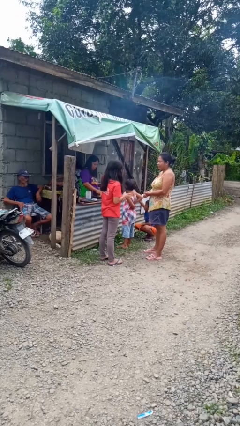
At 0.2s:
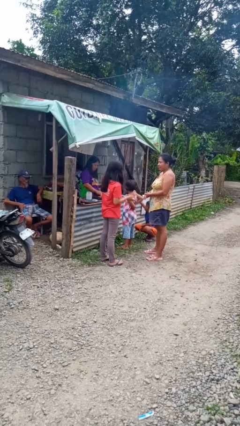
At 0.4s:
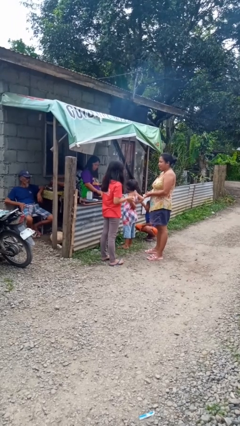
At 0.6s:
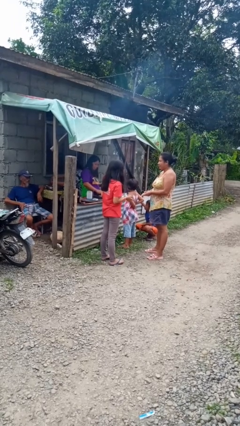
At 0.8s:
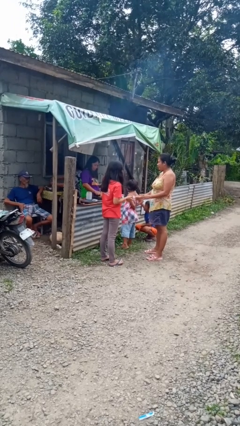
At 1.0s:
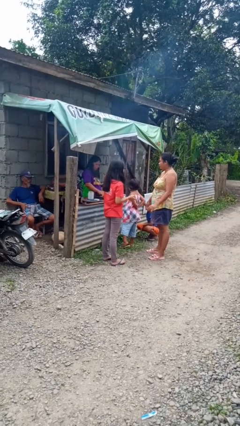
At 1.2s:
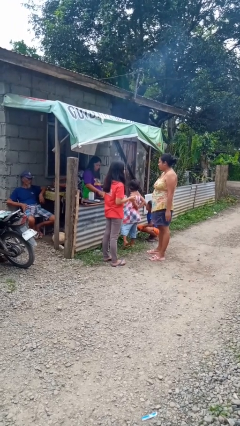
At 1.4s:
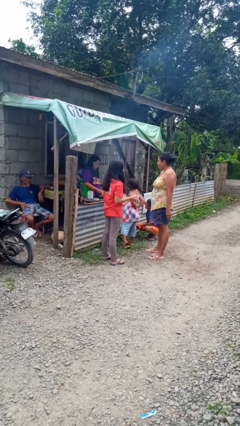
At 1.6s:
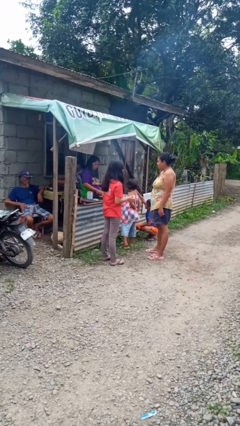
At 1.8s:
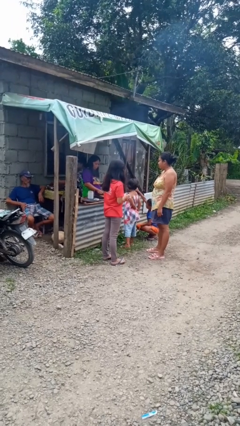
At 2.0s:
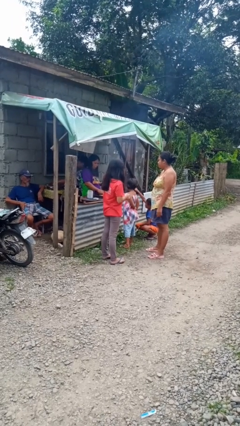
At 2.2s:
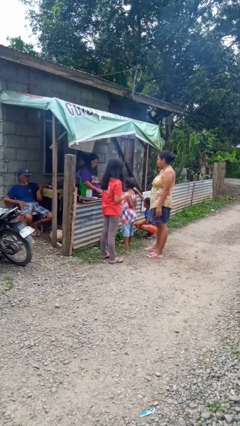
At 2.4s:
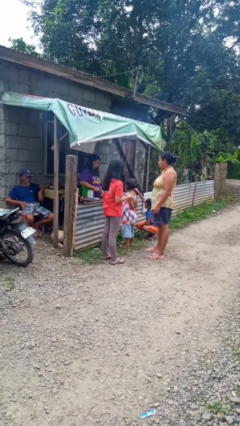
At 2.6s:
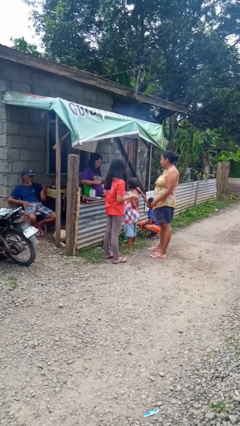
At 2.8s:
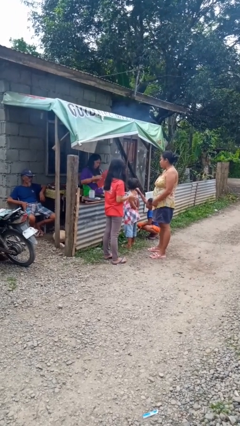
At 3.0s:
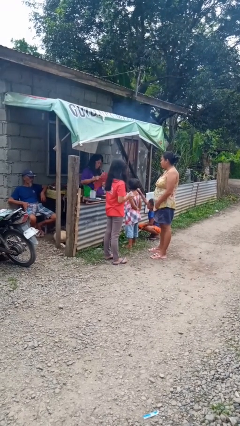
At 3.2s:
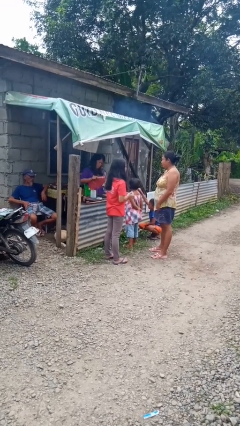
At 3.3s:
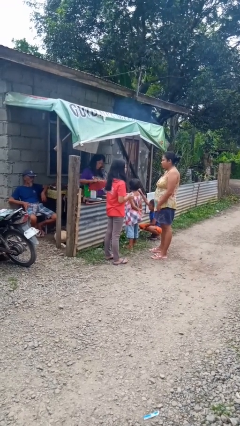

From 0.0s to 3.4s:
person talks to person

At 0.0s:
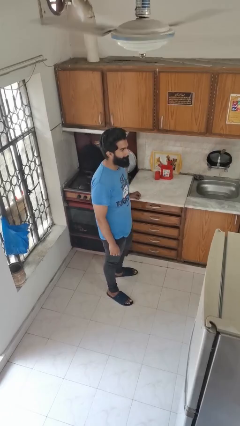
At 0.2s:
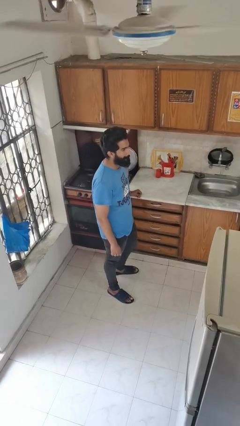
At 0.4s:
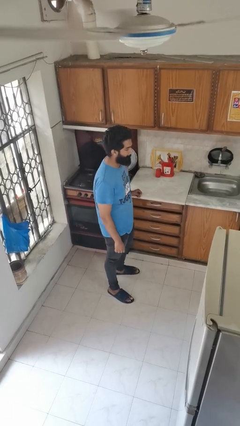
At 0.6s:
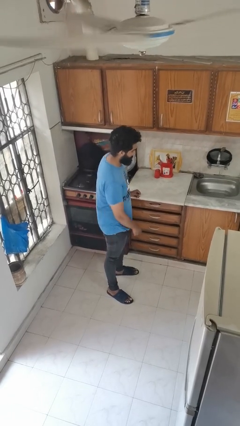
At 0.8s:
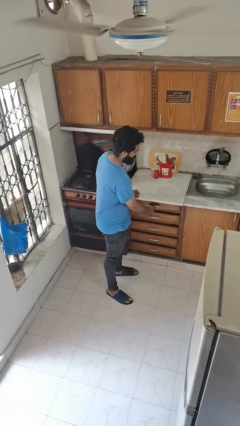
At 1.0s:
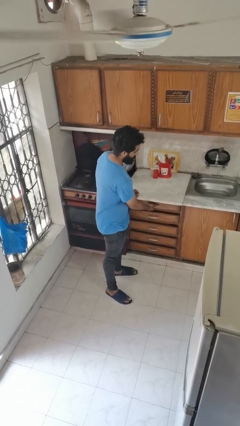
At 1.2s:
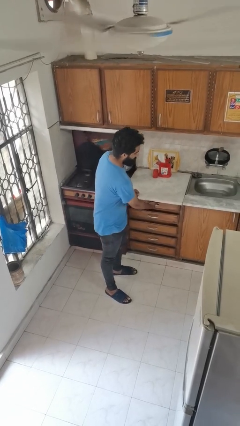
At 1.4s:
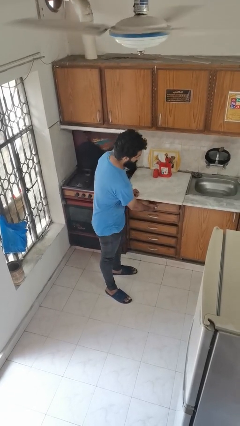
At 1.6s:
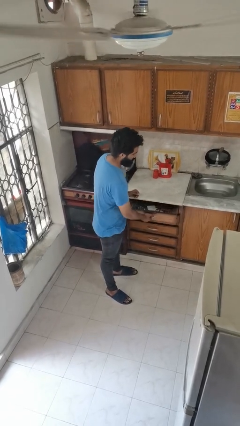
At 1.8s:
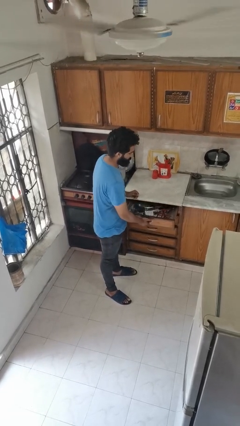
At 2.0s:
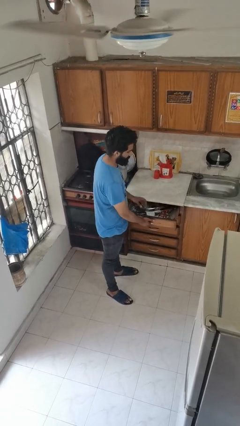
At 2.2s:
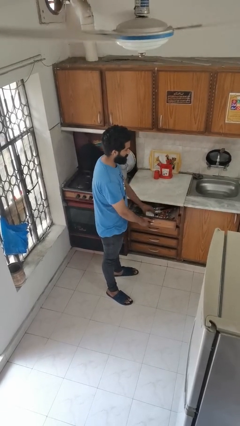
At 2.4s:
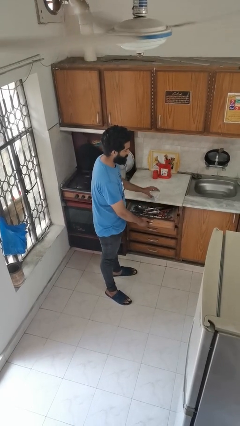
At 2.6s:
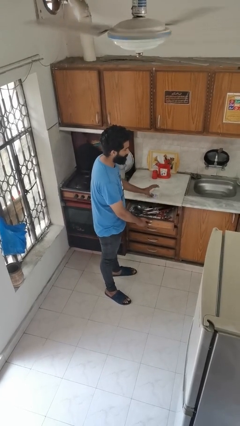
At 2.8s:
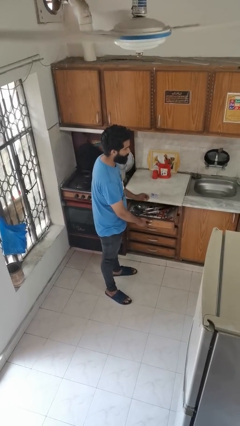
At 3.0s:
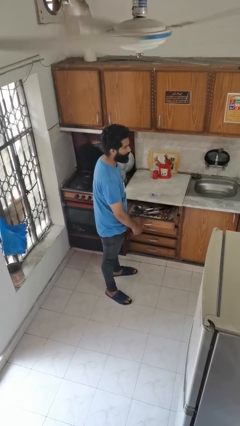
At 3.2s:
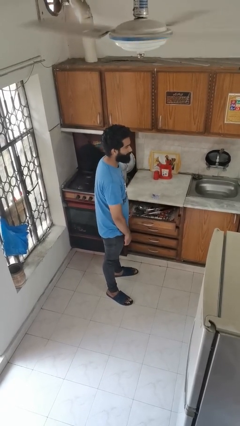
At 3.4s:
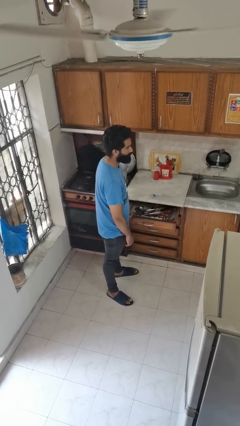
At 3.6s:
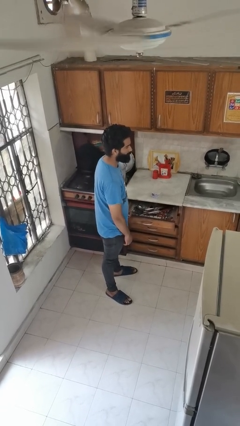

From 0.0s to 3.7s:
person takes object from kitchen drawer

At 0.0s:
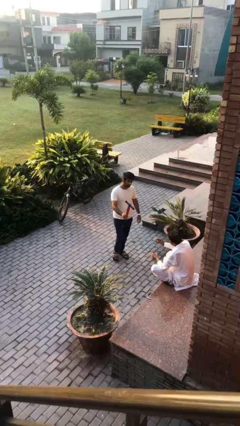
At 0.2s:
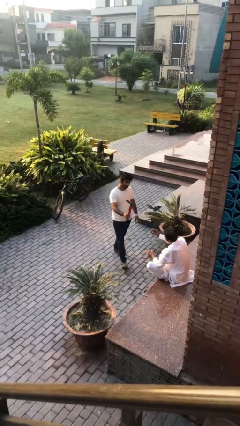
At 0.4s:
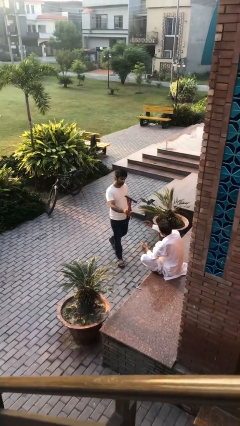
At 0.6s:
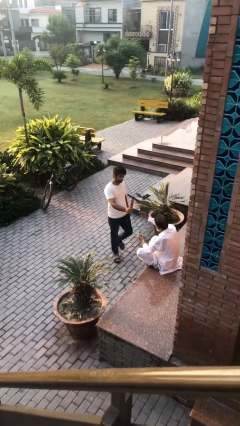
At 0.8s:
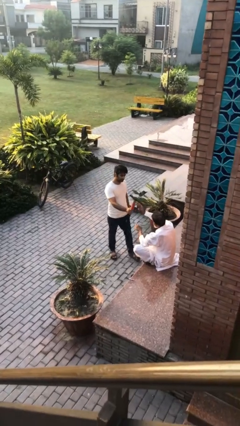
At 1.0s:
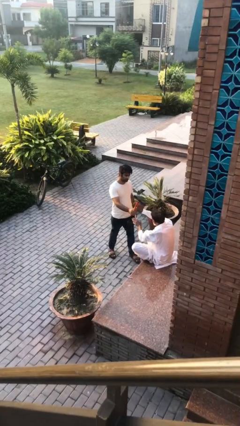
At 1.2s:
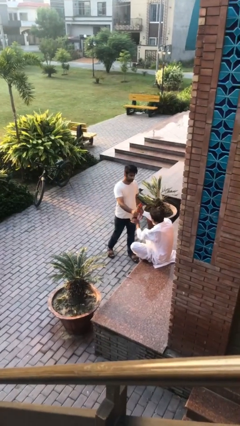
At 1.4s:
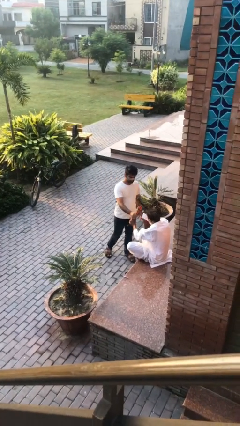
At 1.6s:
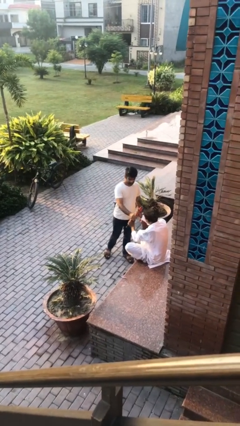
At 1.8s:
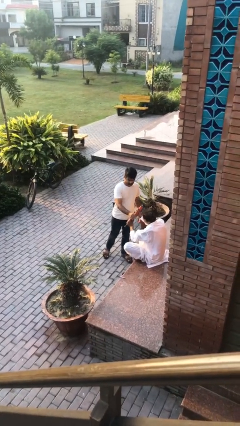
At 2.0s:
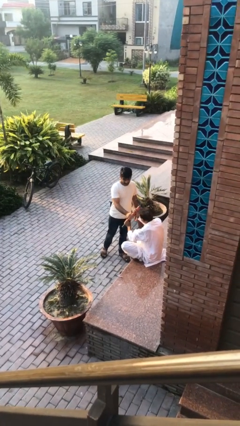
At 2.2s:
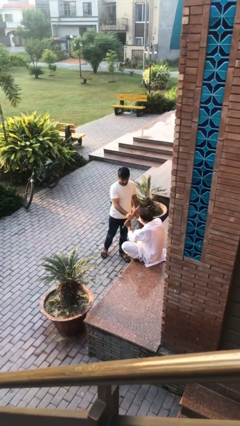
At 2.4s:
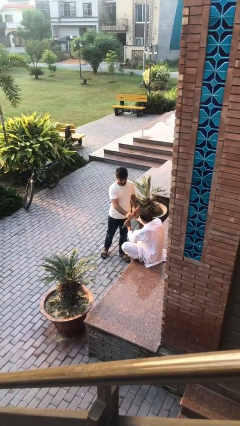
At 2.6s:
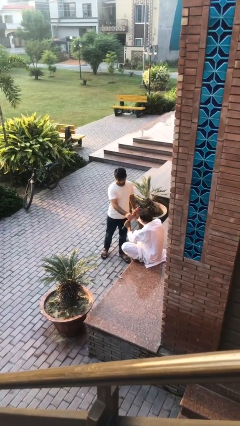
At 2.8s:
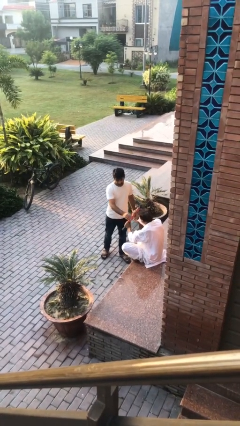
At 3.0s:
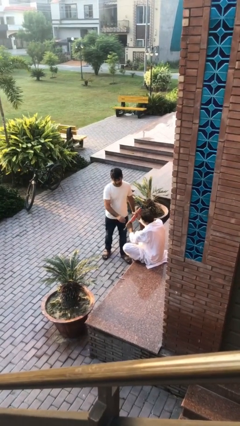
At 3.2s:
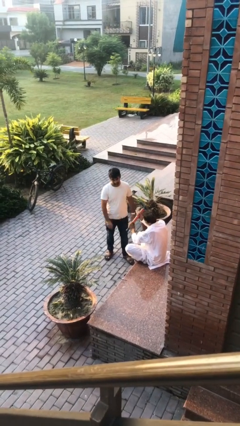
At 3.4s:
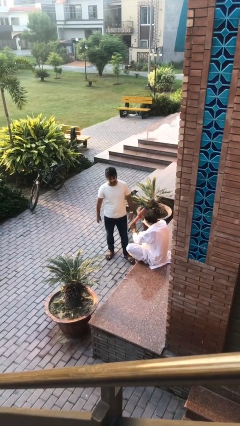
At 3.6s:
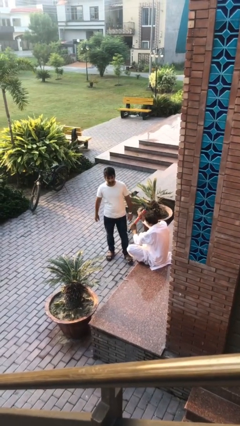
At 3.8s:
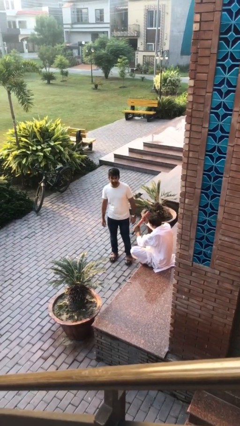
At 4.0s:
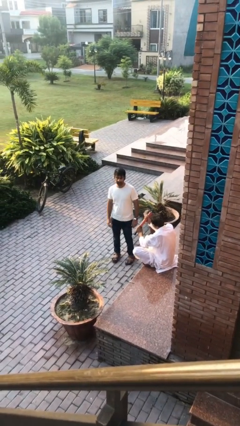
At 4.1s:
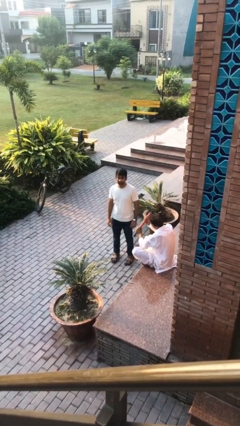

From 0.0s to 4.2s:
person transfers object to person

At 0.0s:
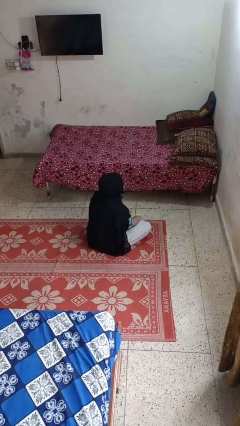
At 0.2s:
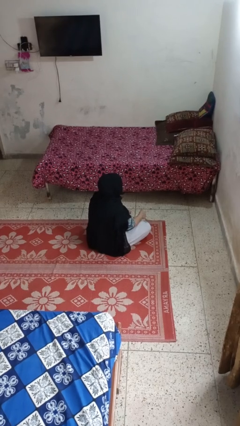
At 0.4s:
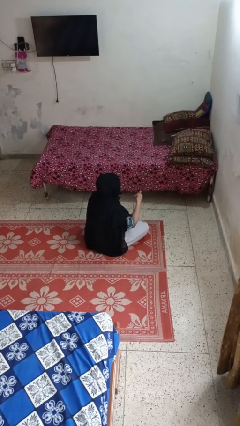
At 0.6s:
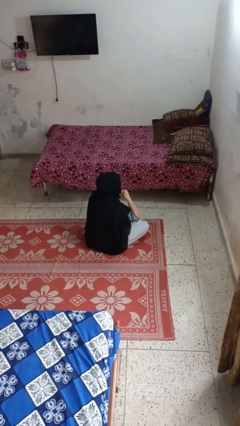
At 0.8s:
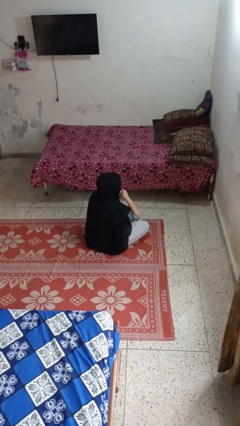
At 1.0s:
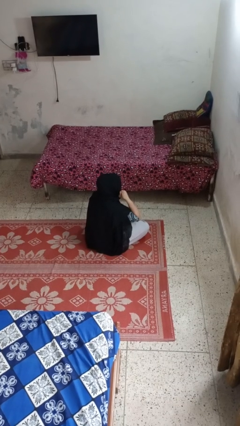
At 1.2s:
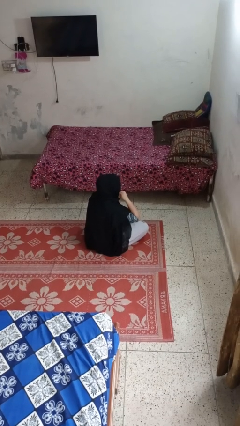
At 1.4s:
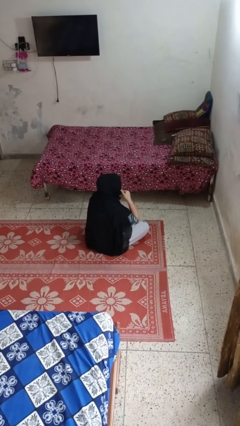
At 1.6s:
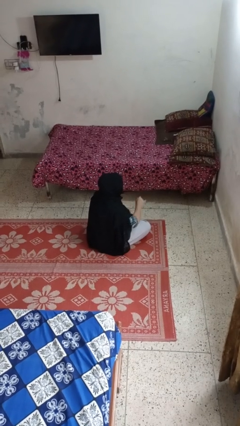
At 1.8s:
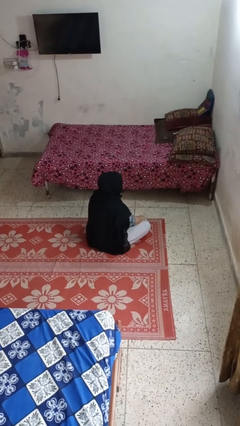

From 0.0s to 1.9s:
person gestures call me

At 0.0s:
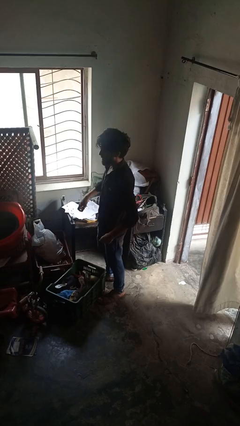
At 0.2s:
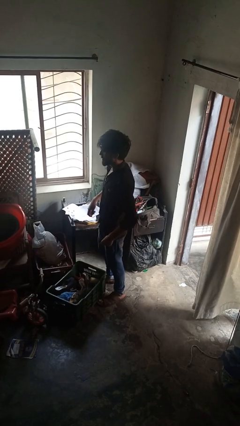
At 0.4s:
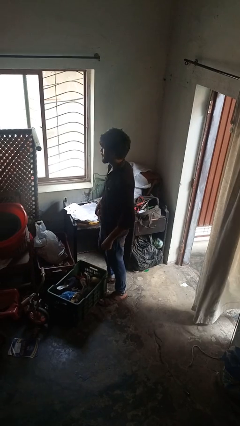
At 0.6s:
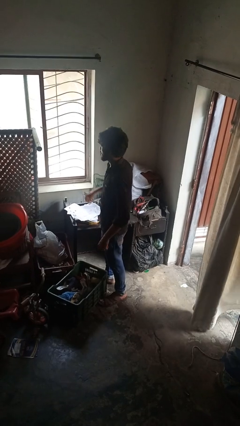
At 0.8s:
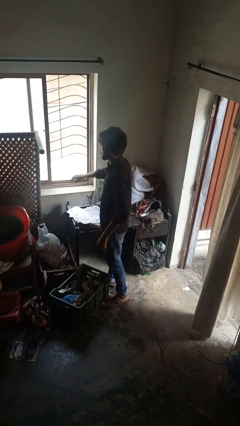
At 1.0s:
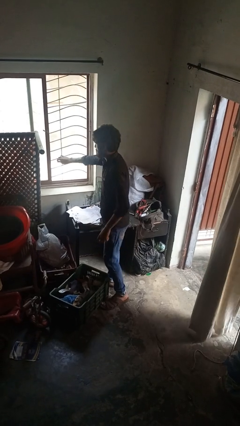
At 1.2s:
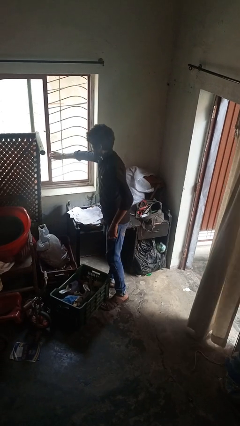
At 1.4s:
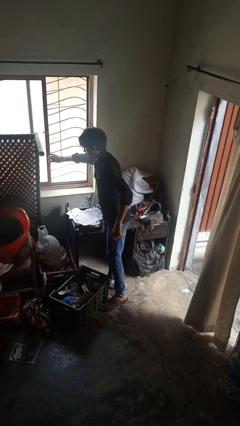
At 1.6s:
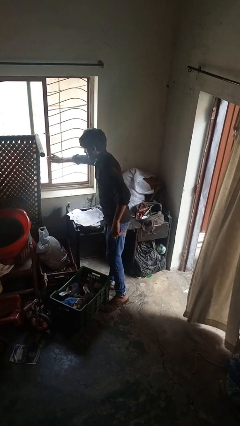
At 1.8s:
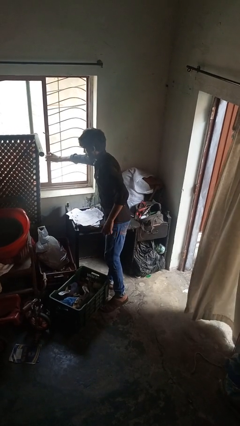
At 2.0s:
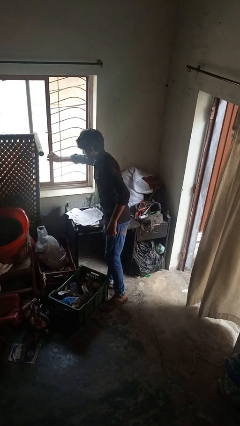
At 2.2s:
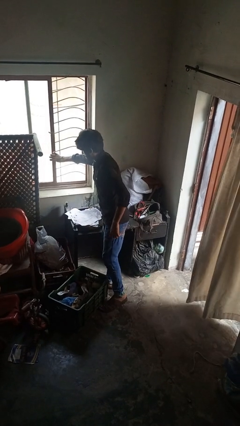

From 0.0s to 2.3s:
person closes home window

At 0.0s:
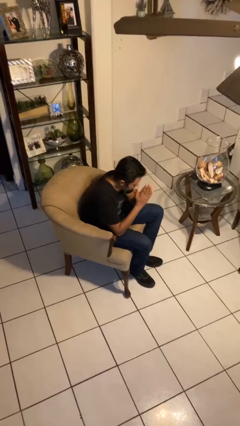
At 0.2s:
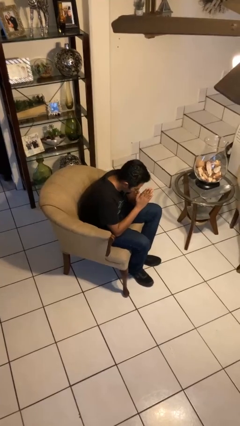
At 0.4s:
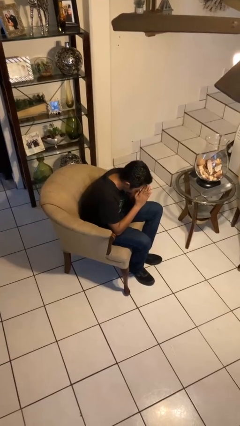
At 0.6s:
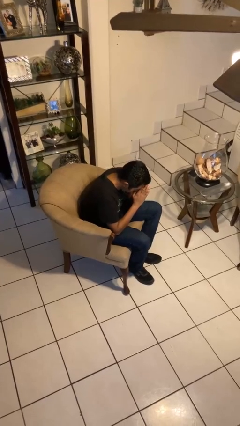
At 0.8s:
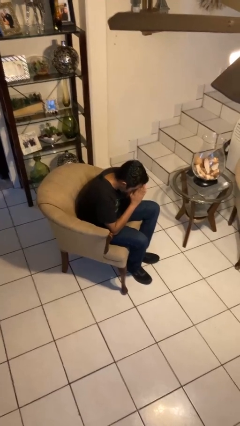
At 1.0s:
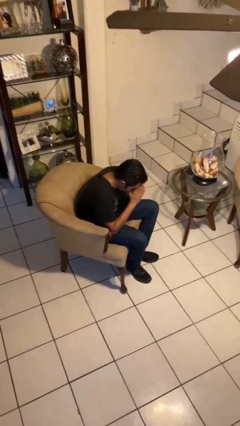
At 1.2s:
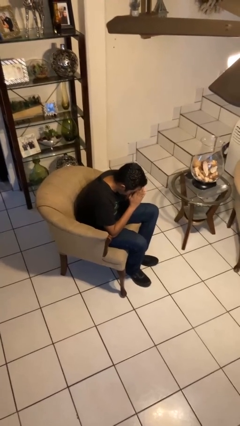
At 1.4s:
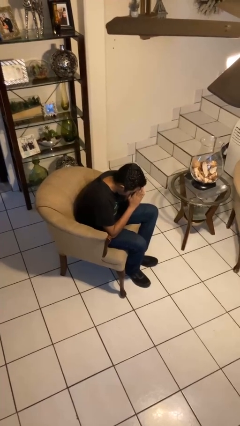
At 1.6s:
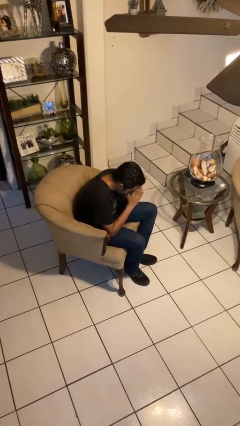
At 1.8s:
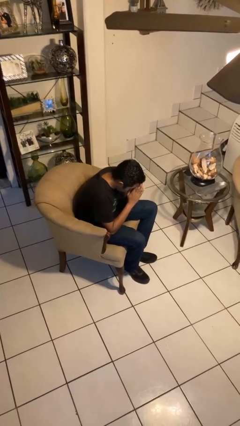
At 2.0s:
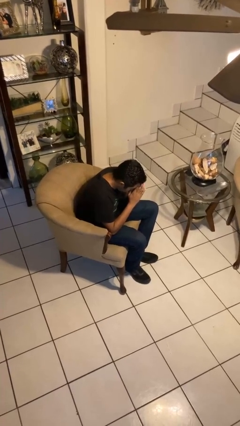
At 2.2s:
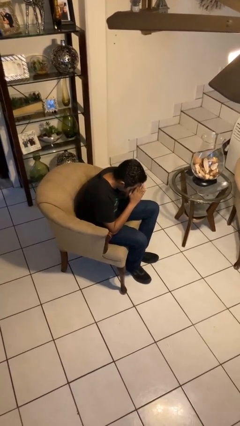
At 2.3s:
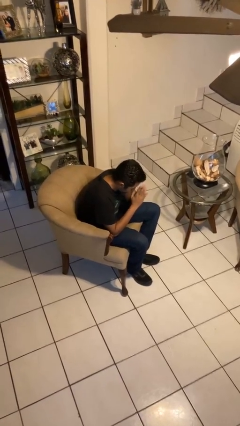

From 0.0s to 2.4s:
person prays
